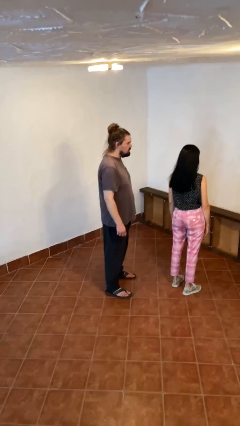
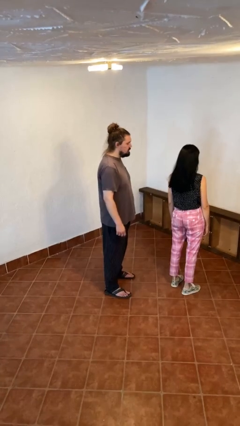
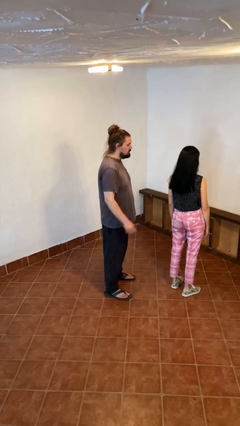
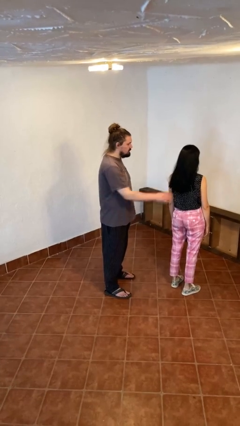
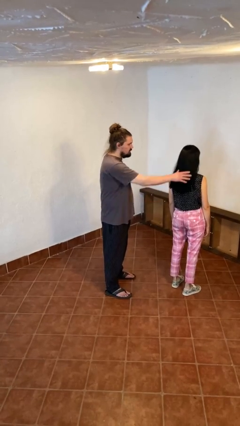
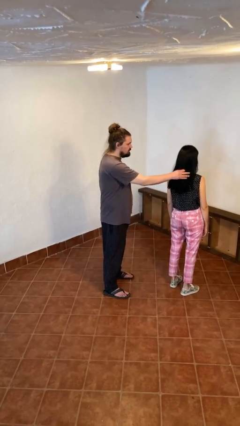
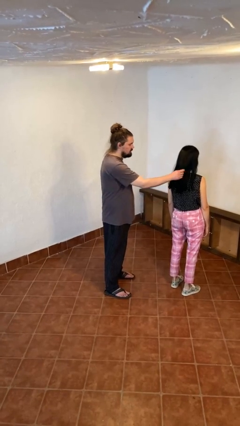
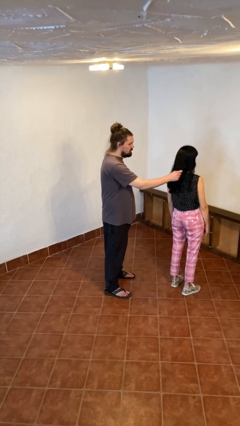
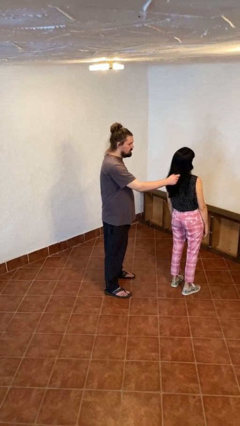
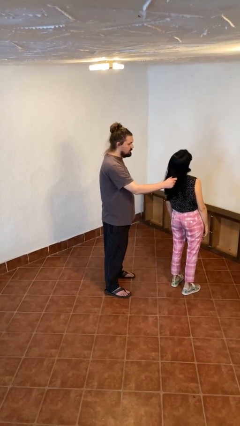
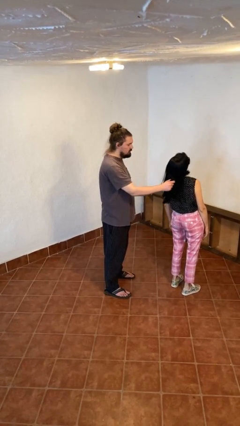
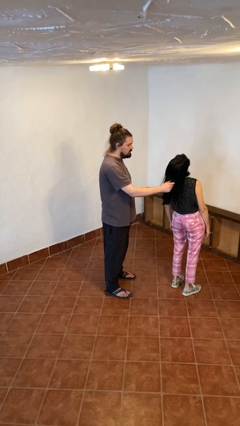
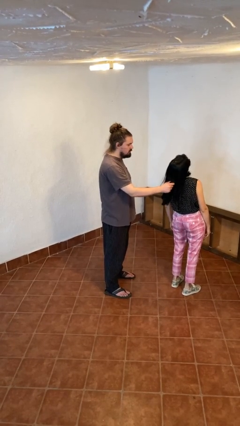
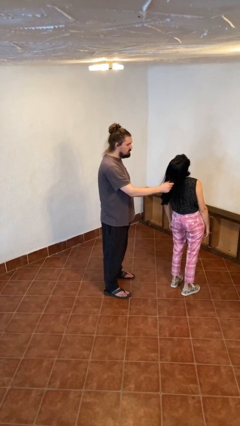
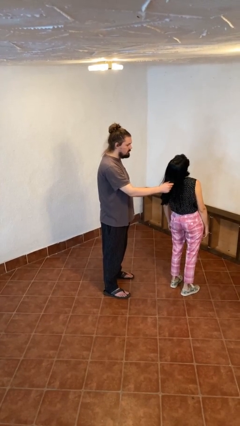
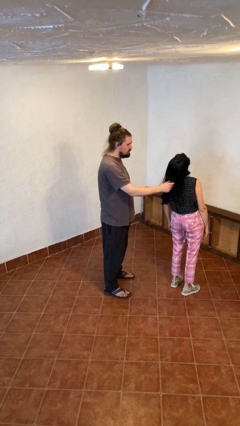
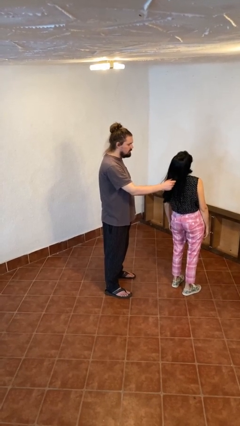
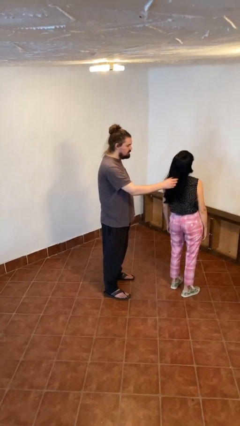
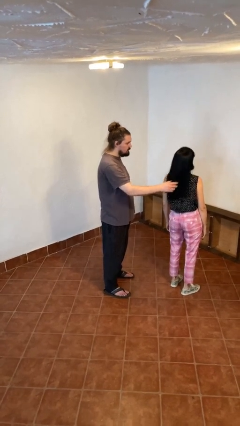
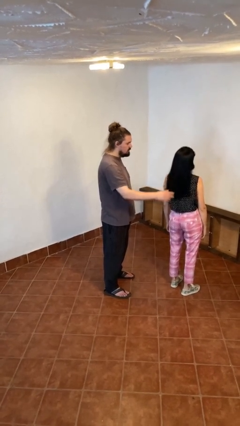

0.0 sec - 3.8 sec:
person grabs person by hair

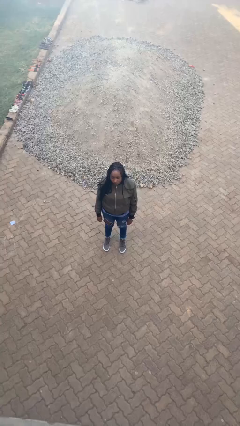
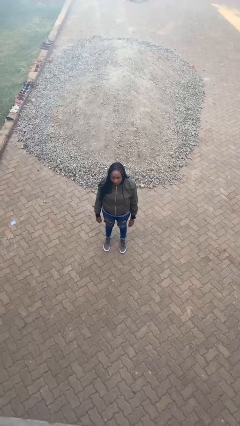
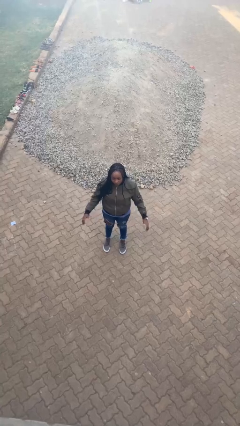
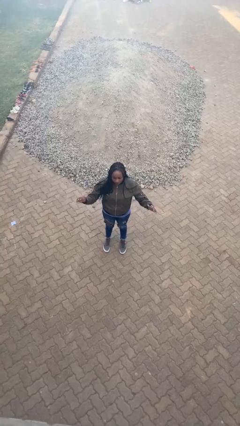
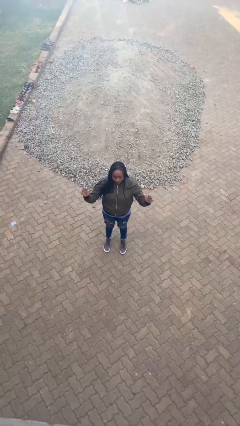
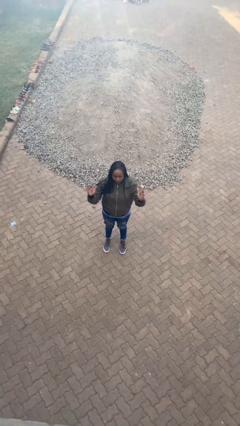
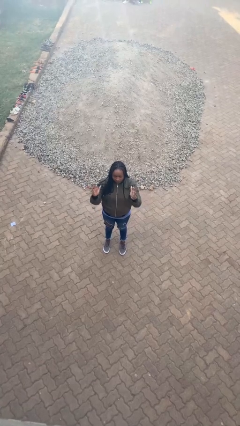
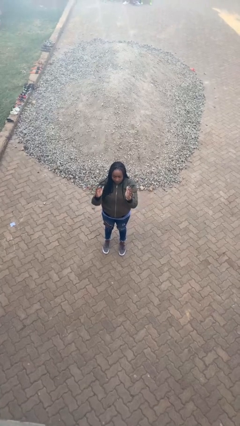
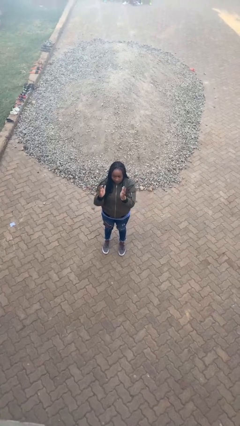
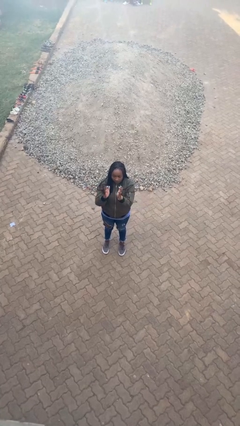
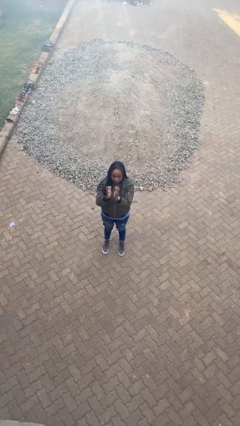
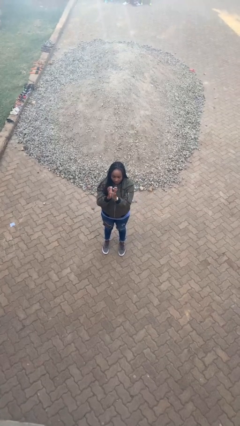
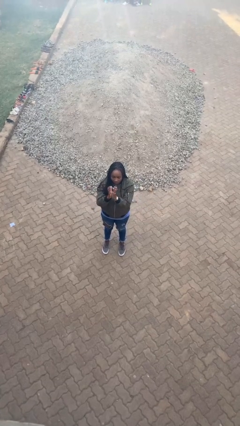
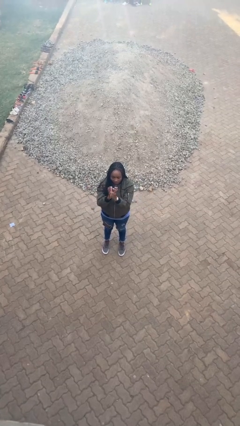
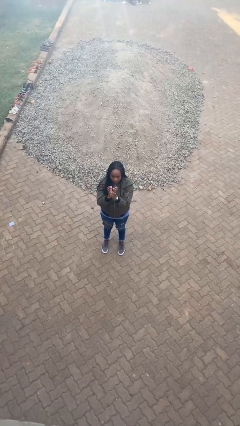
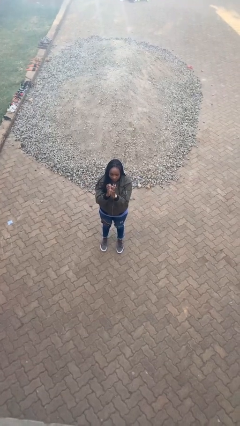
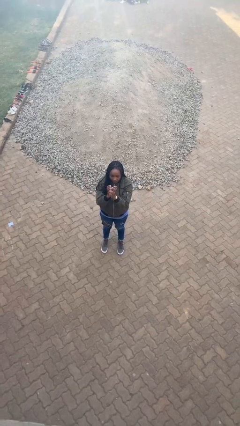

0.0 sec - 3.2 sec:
person gestures zoom in

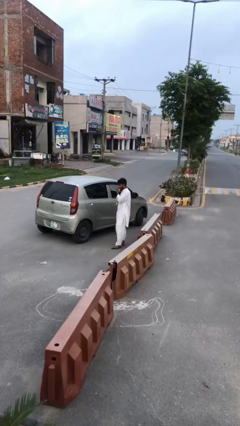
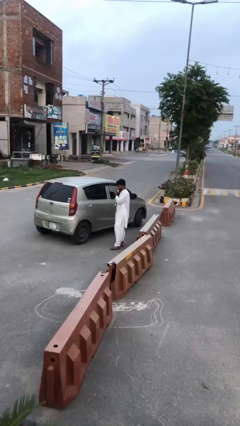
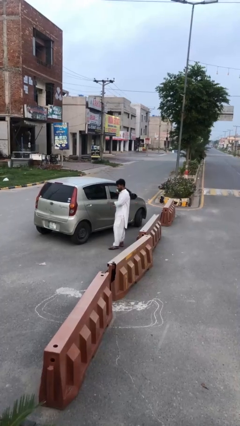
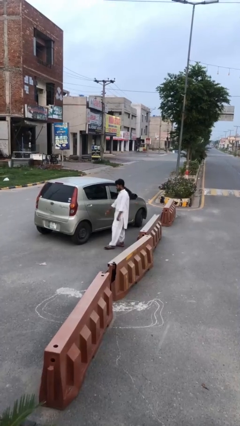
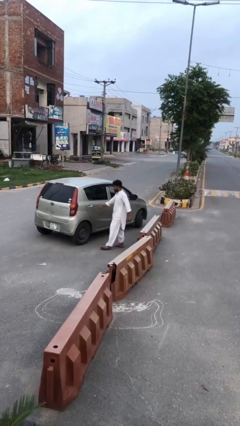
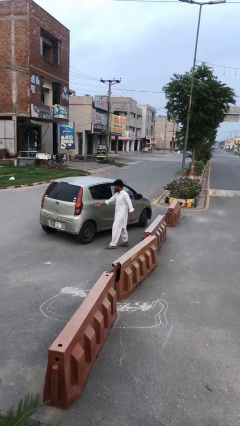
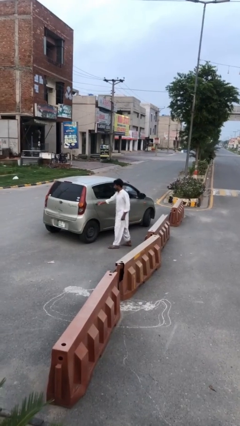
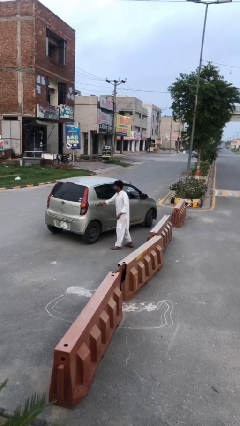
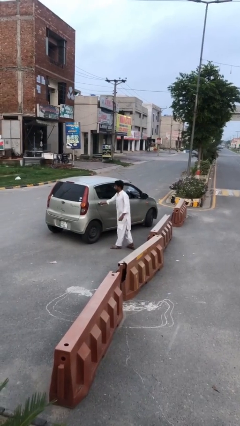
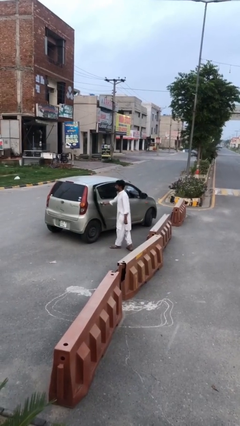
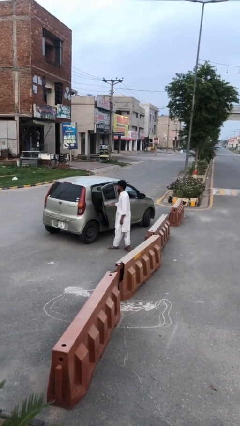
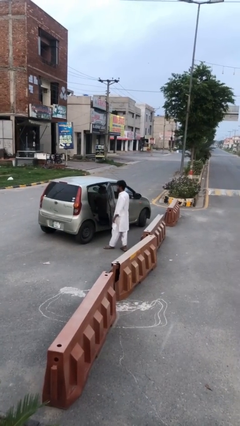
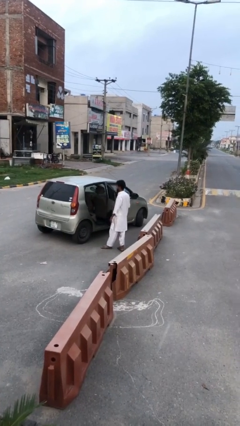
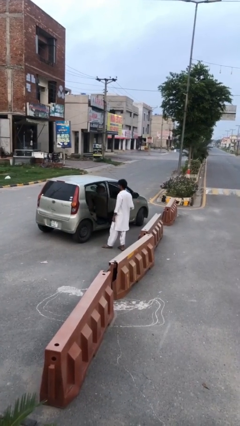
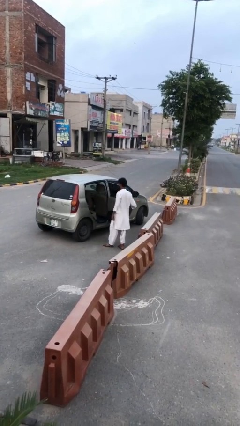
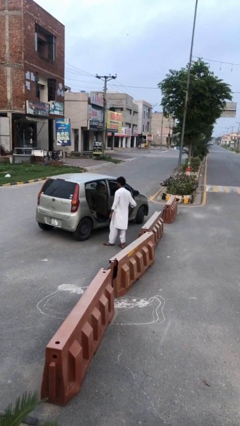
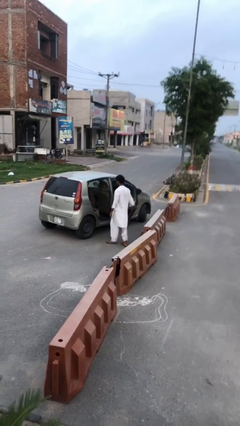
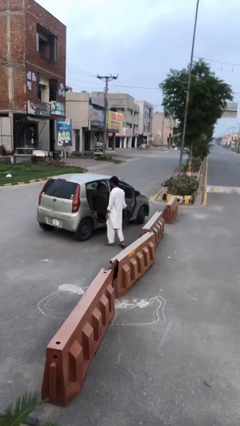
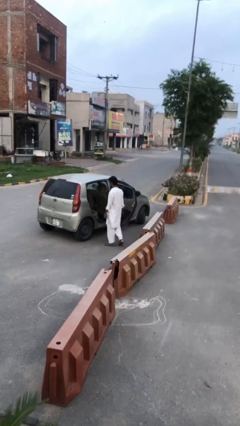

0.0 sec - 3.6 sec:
person opens car door

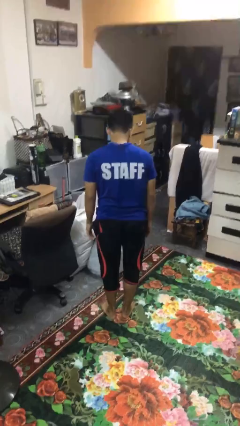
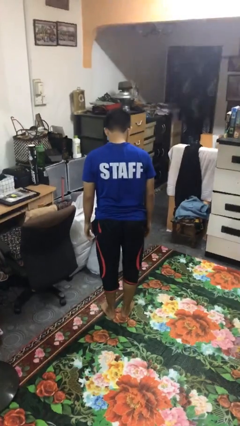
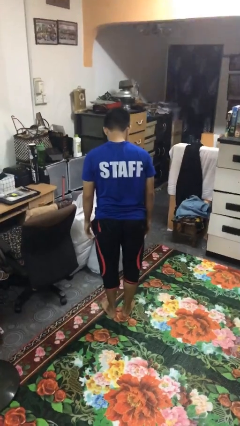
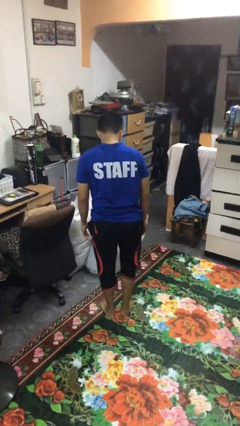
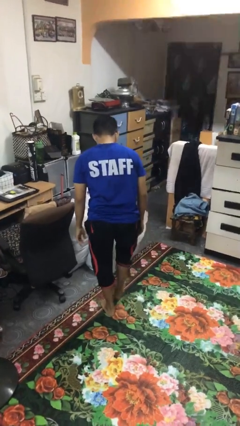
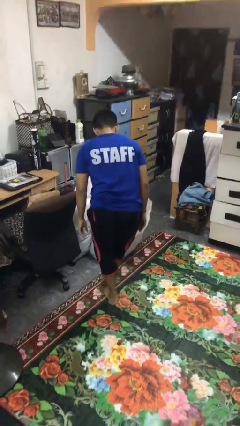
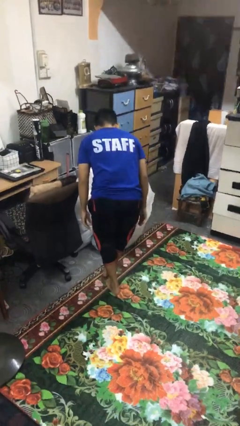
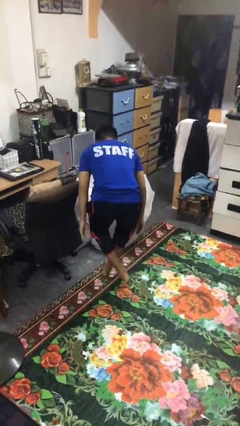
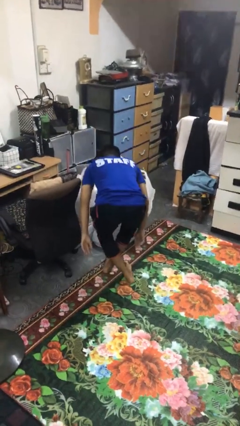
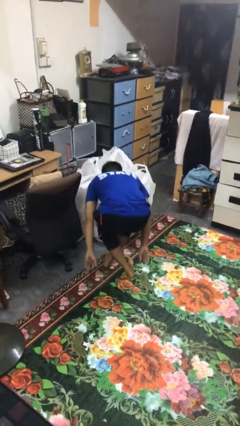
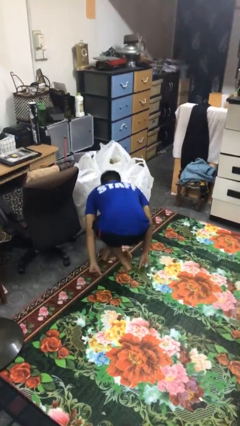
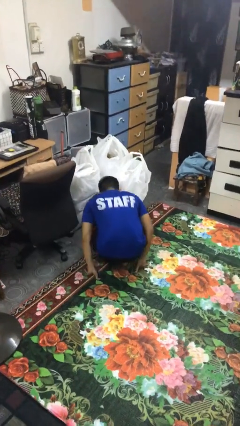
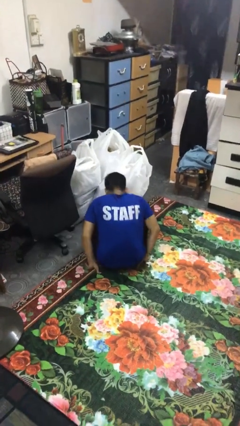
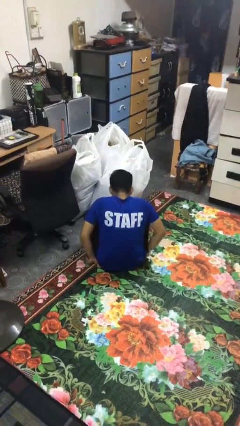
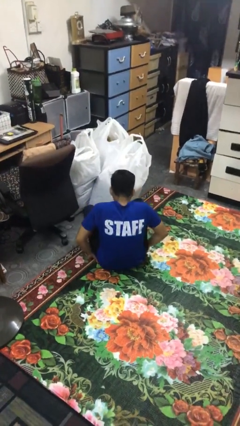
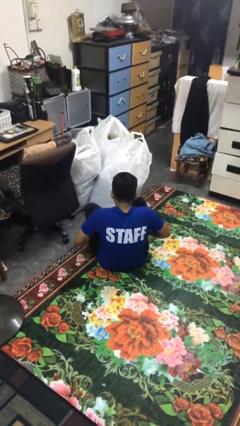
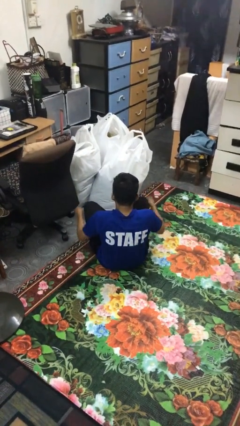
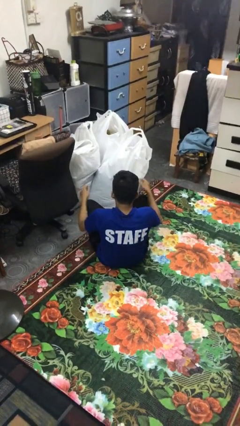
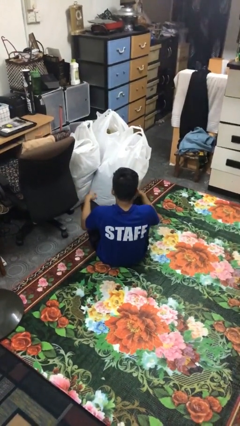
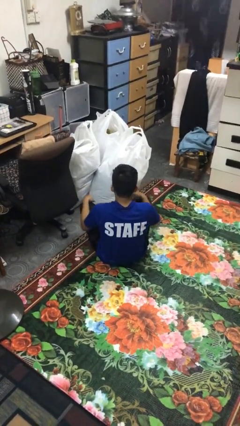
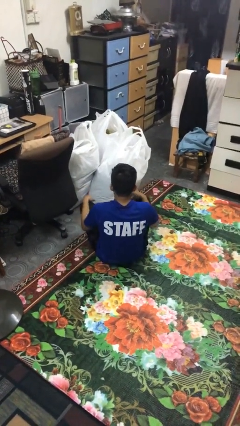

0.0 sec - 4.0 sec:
person sits crisscross

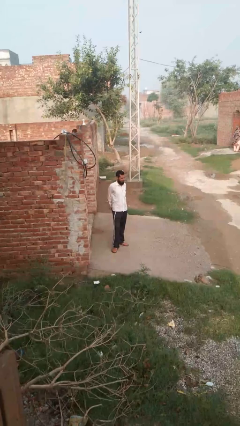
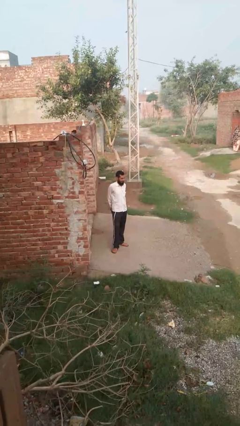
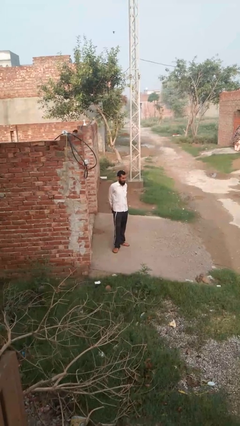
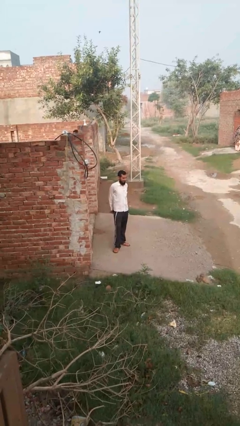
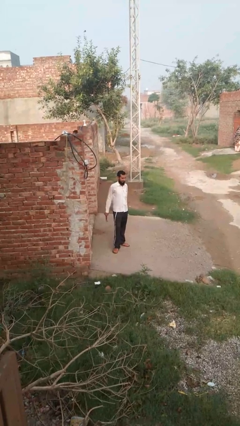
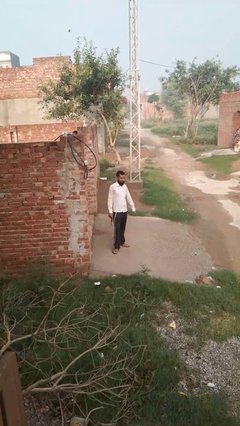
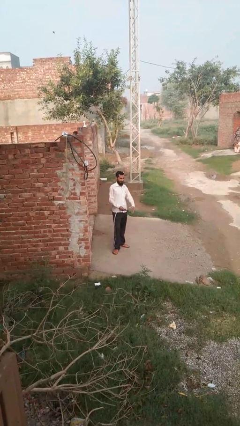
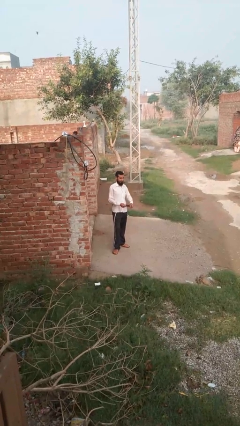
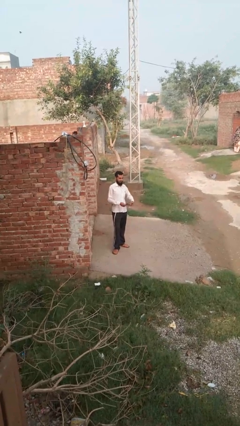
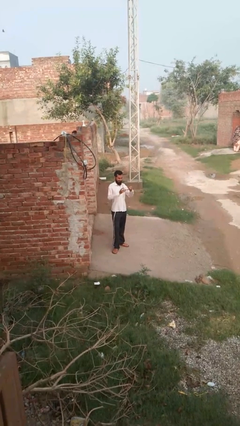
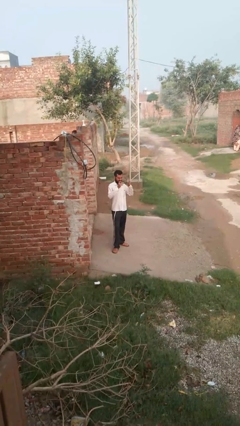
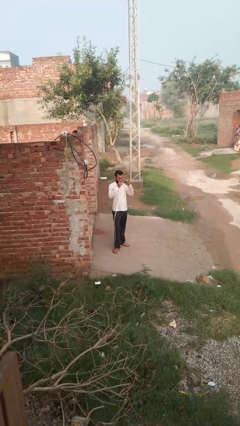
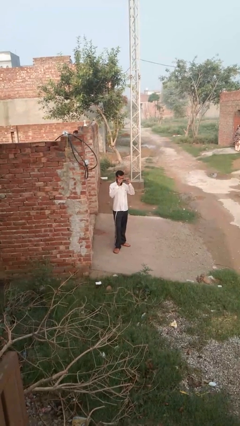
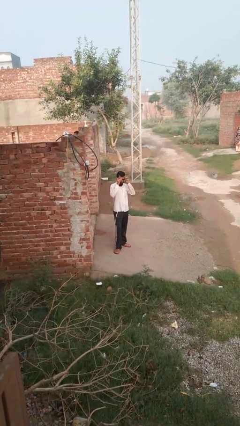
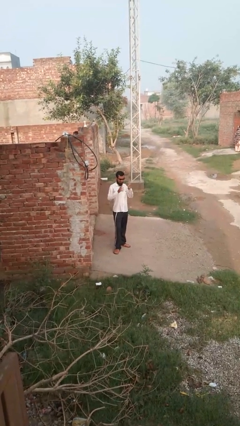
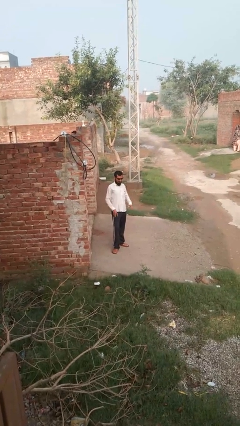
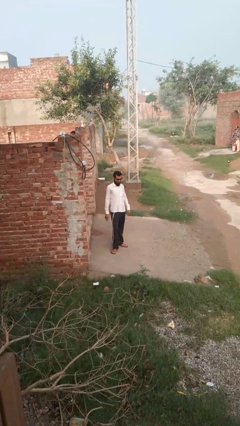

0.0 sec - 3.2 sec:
person puts on glasses
